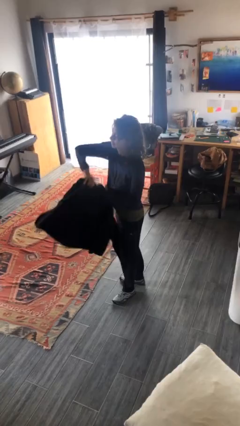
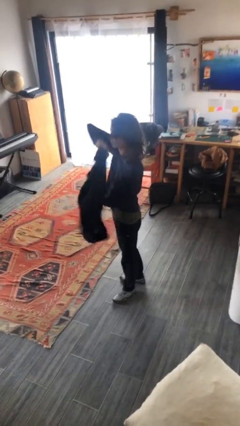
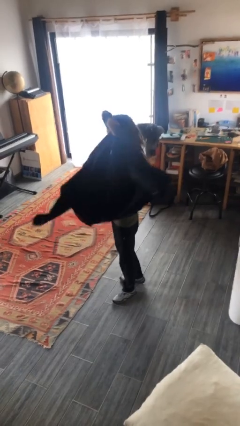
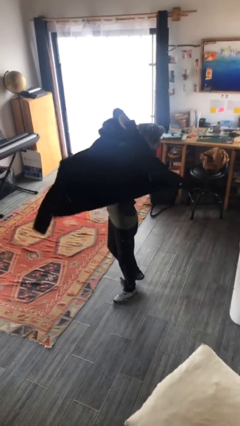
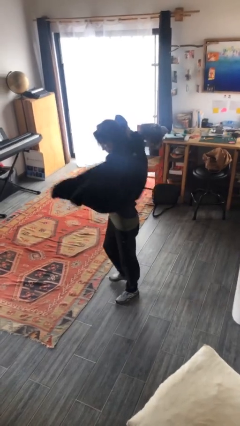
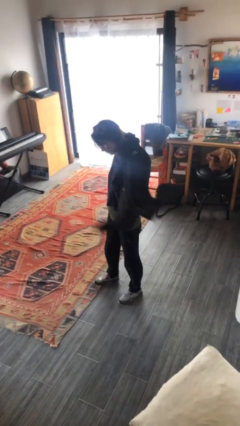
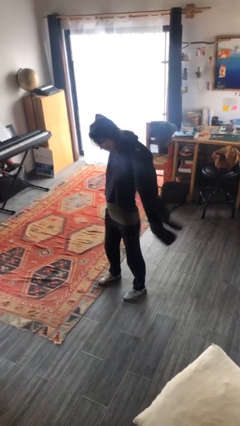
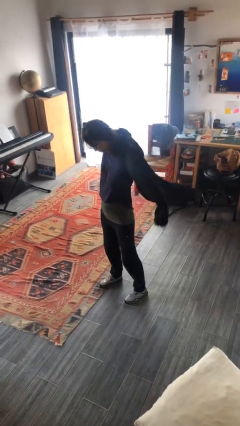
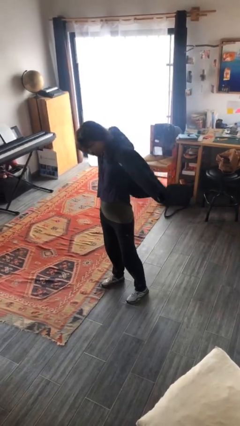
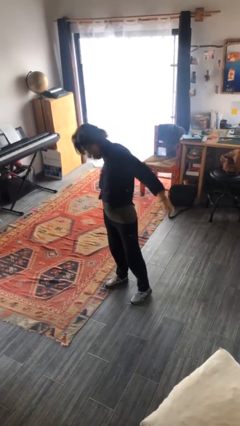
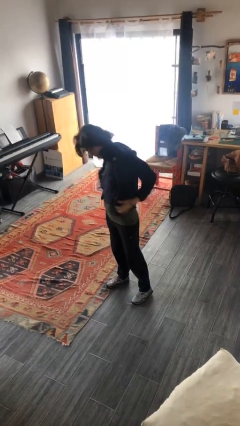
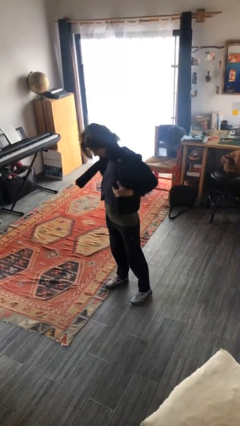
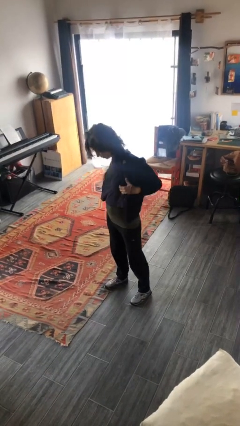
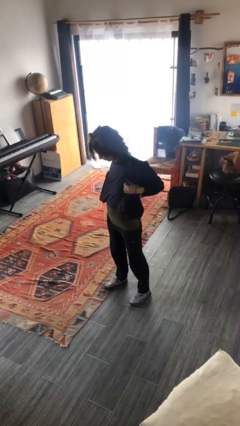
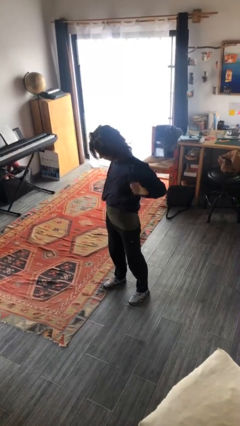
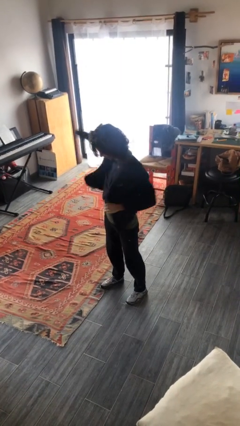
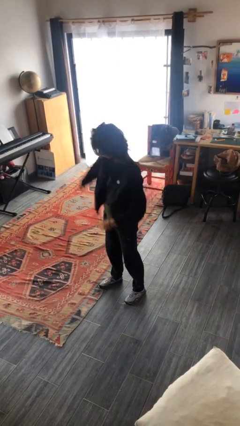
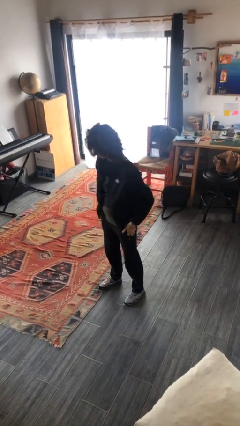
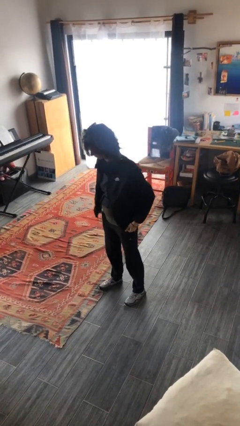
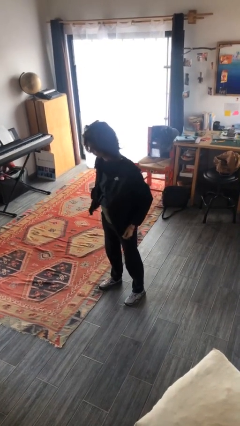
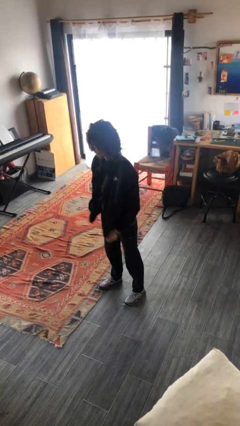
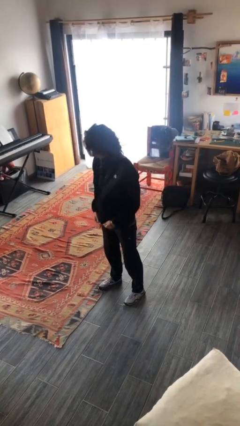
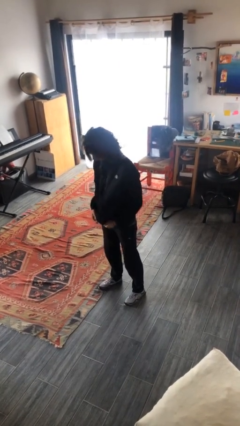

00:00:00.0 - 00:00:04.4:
person puts on jacket

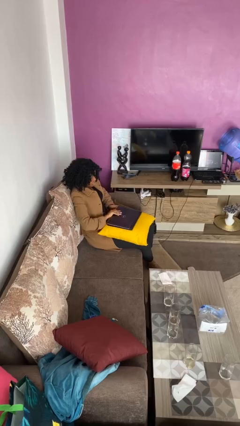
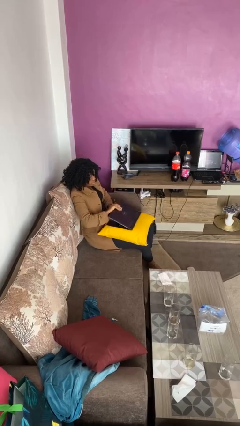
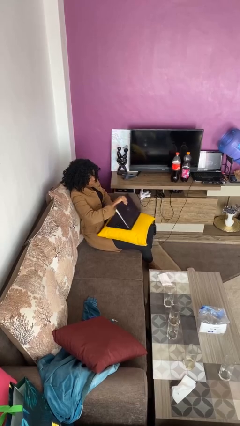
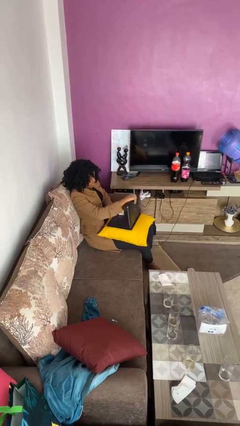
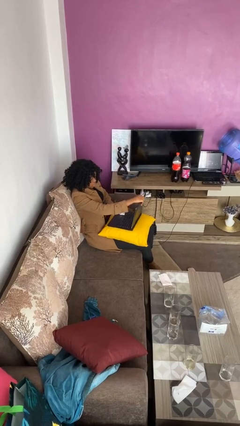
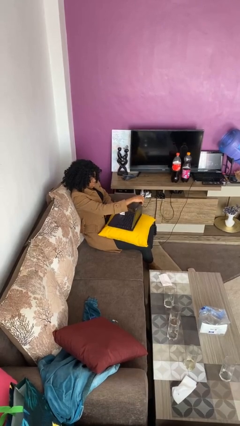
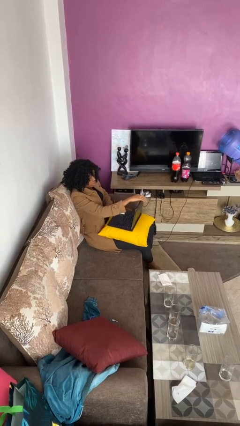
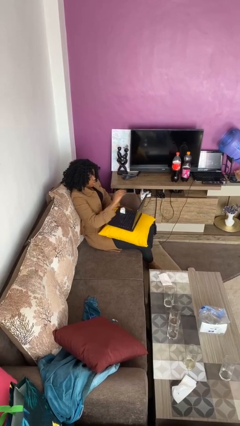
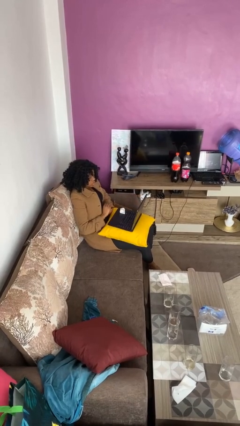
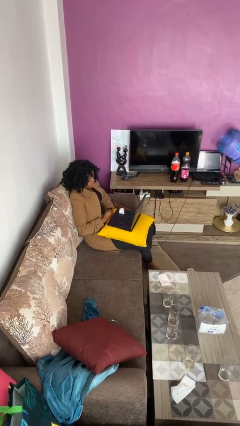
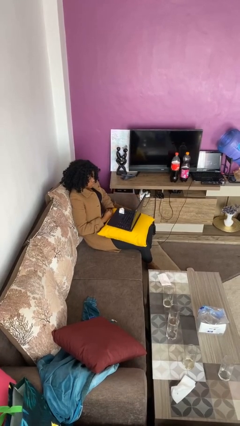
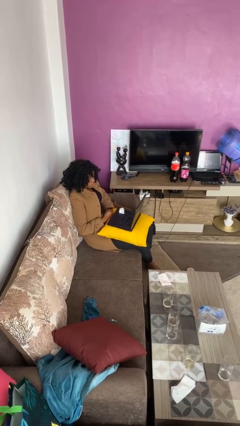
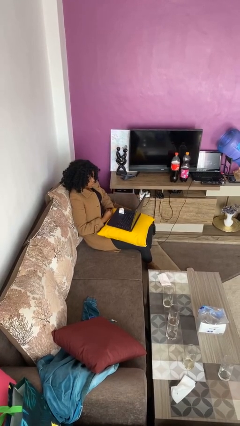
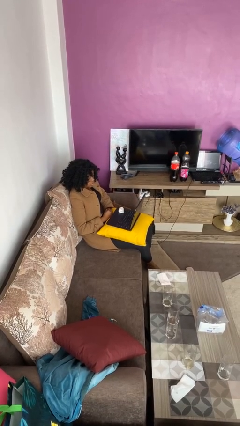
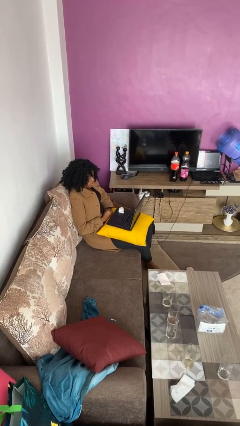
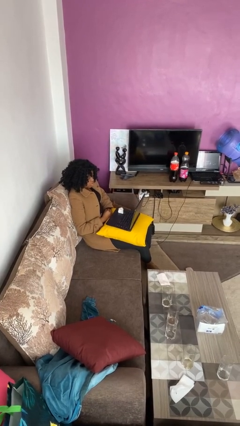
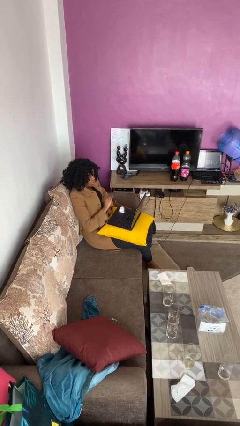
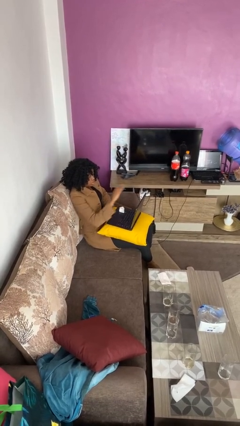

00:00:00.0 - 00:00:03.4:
person opens laptop

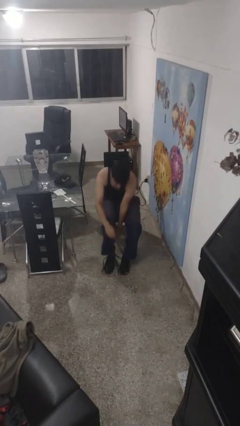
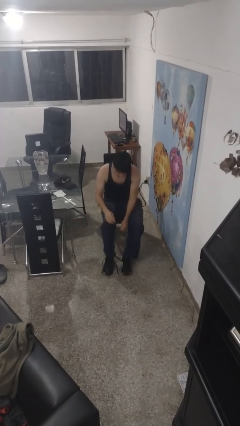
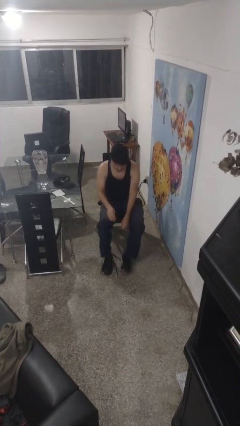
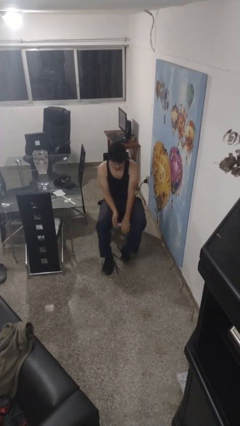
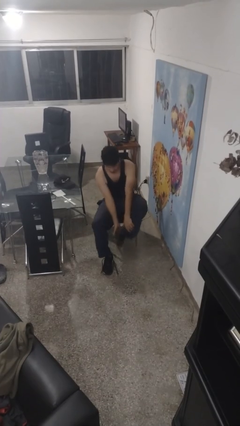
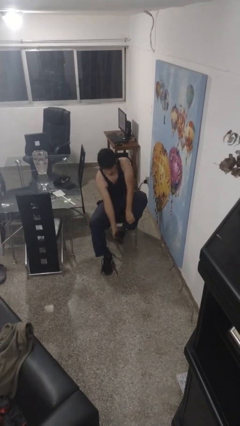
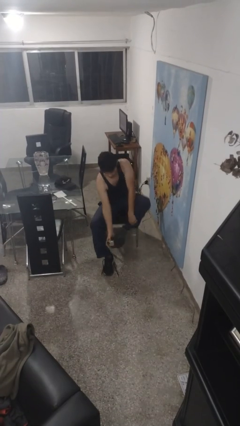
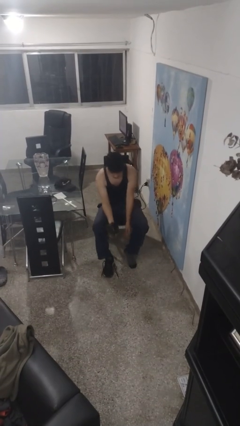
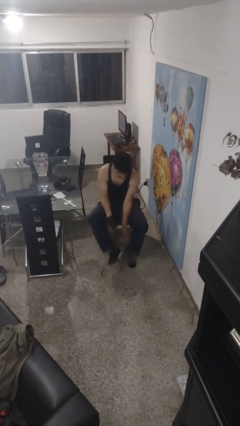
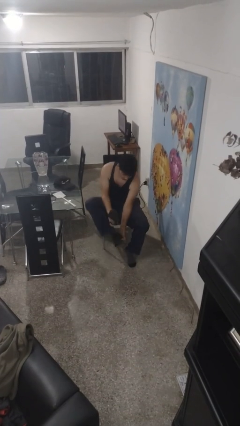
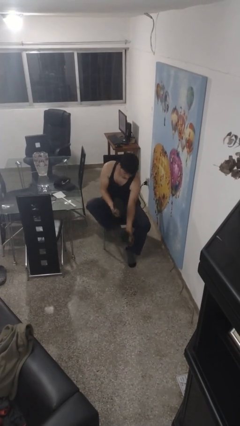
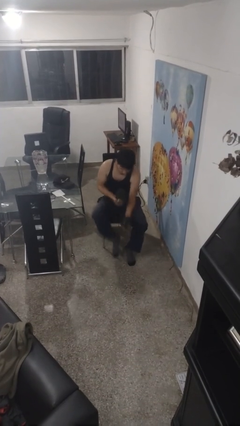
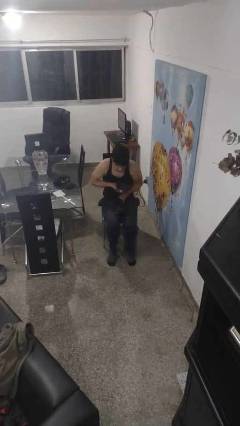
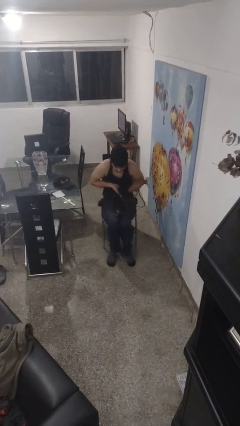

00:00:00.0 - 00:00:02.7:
person takes off shoes

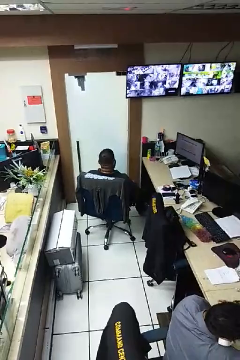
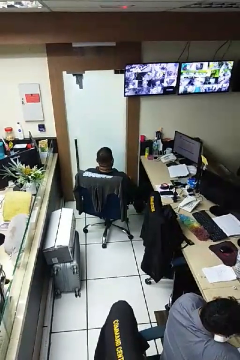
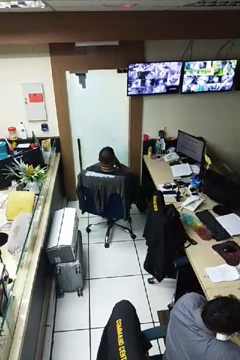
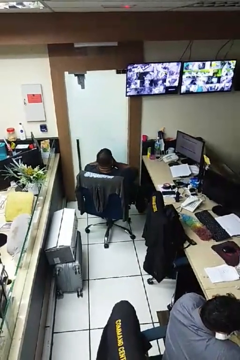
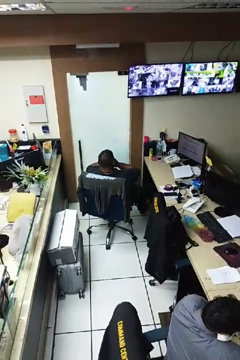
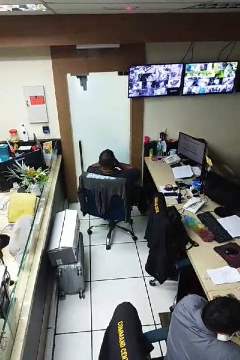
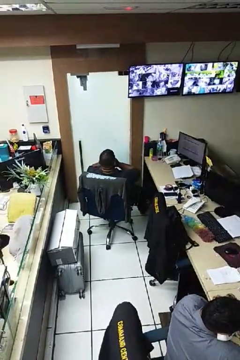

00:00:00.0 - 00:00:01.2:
person covers face with hands

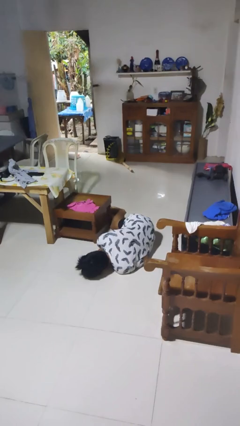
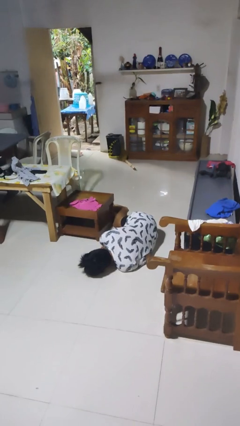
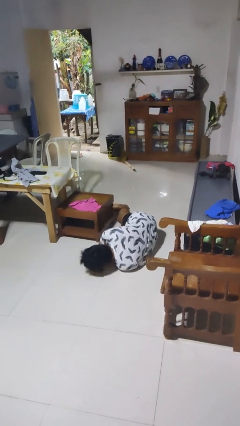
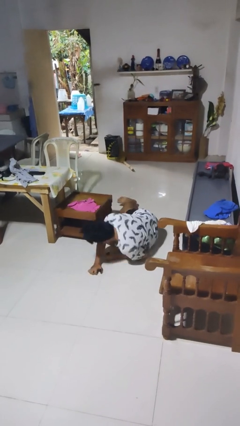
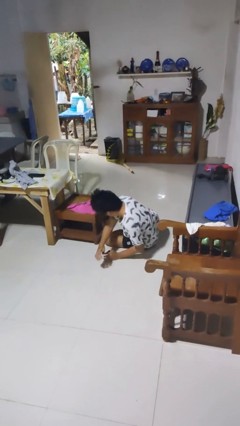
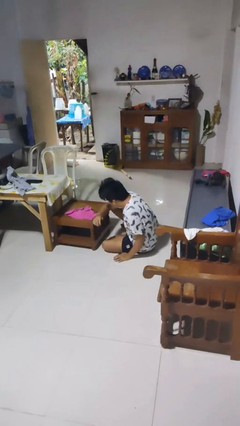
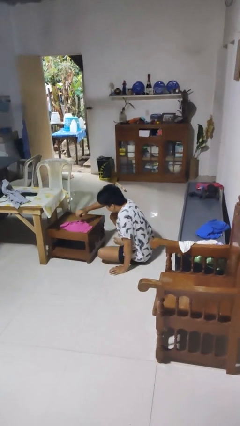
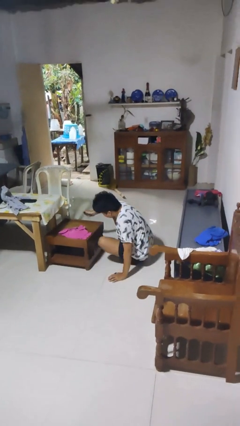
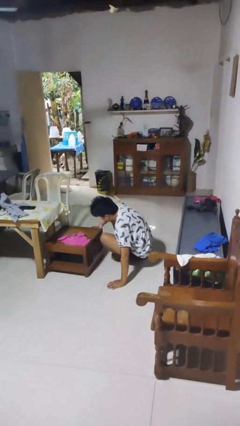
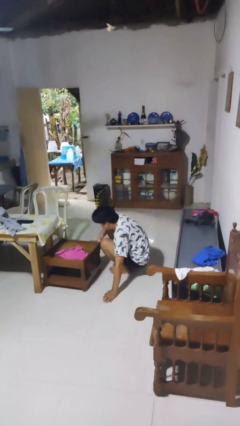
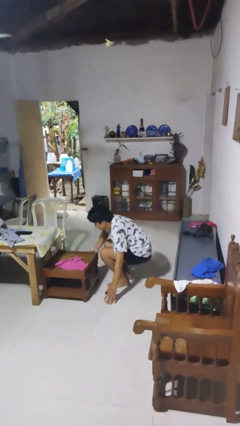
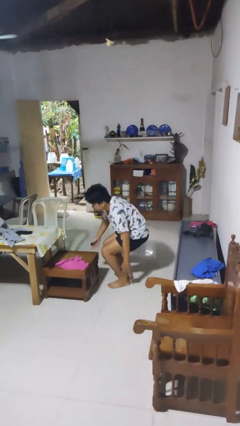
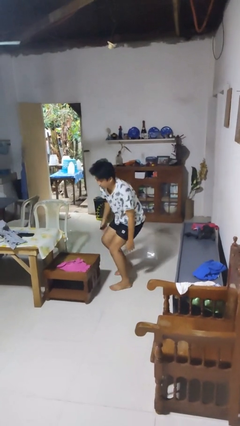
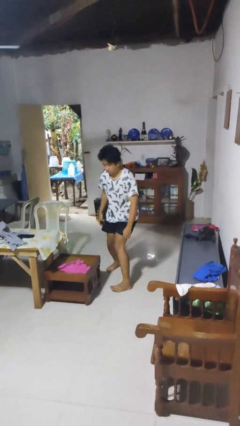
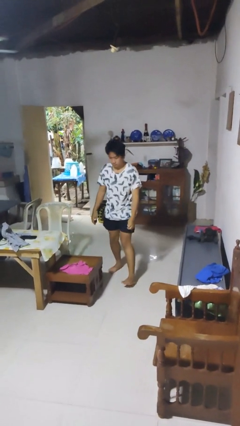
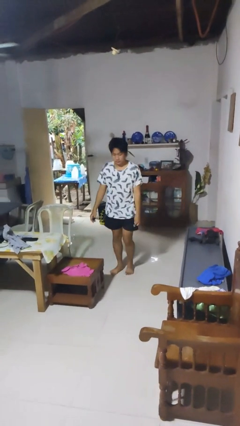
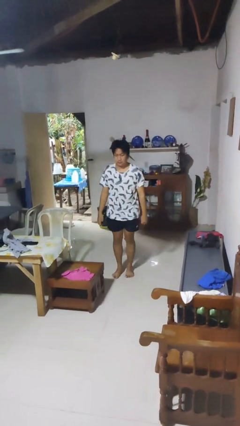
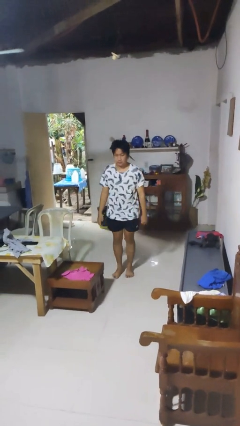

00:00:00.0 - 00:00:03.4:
person stands up from floor

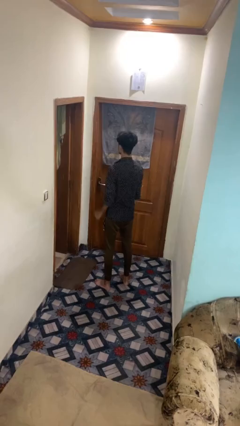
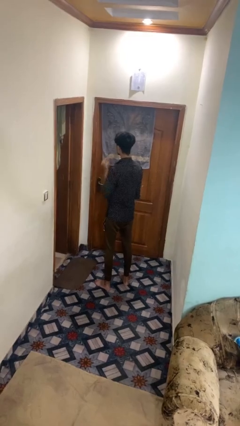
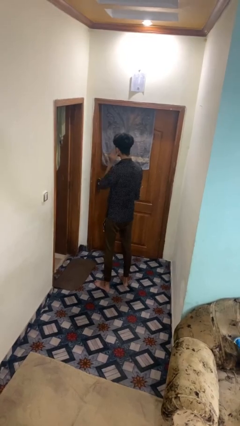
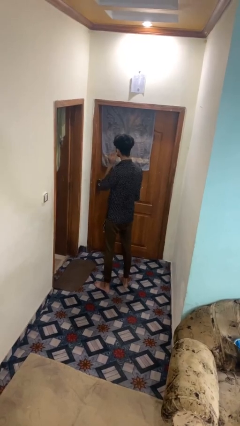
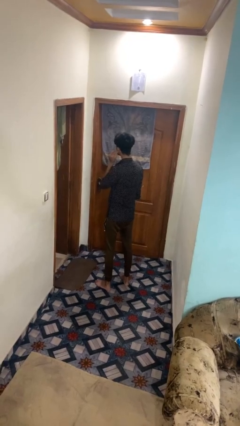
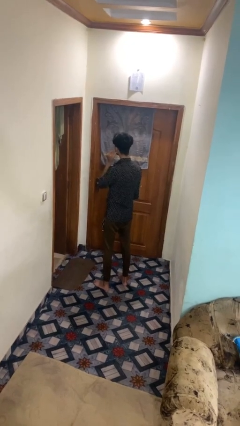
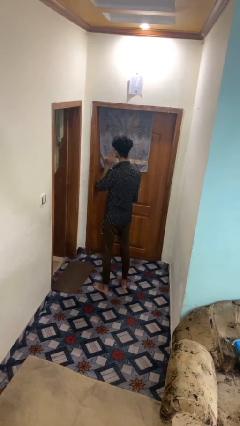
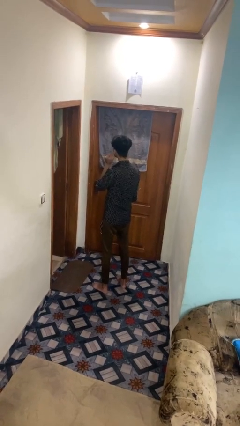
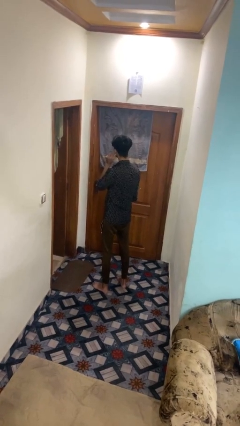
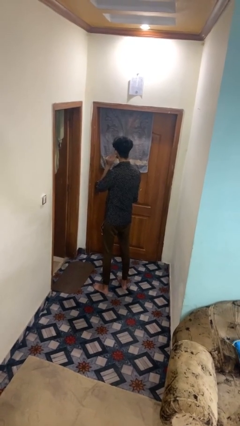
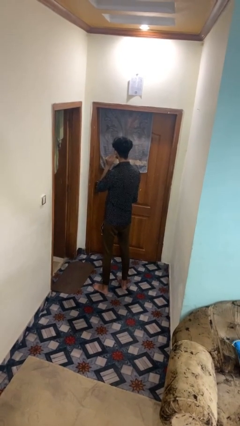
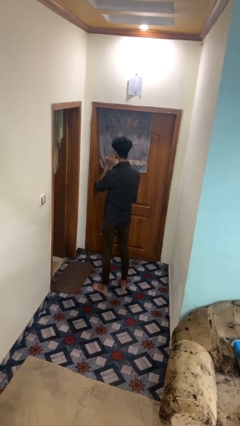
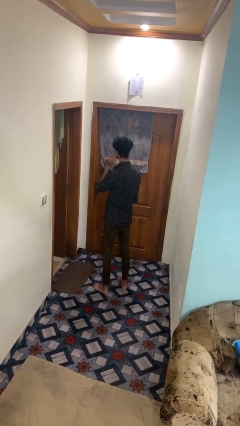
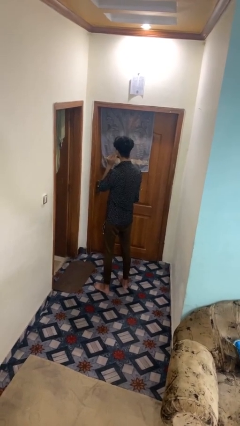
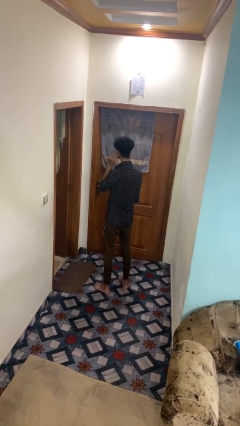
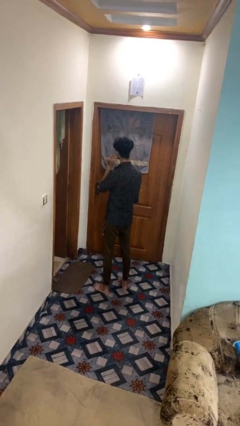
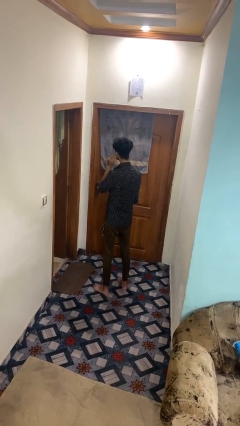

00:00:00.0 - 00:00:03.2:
person touches earlobe
